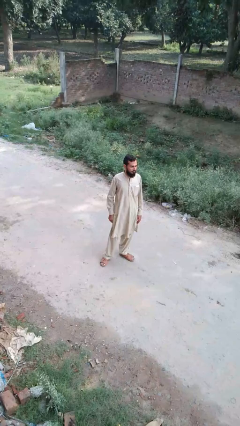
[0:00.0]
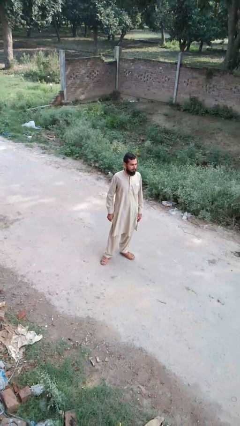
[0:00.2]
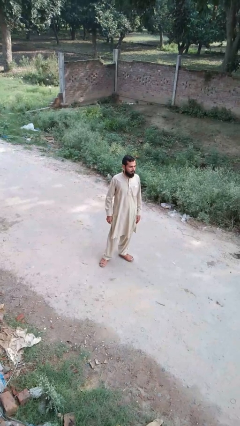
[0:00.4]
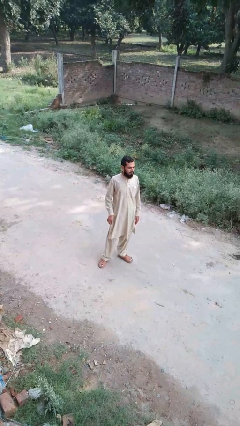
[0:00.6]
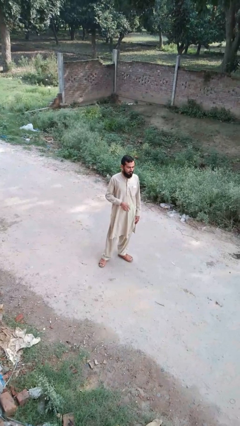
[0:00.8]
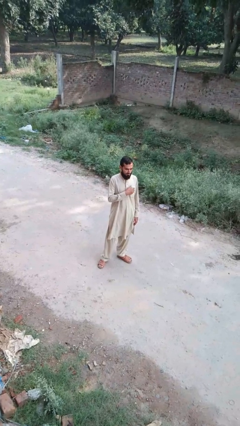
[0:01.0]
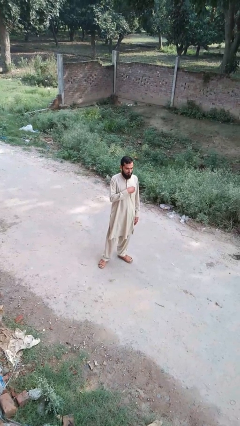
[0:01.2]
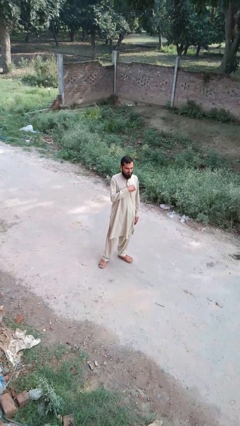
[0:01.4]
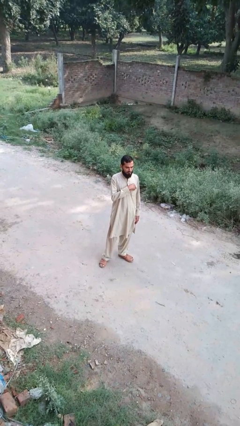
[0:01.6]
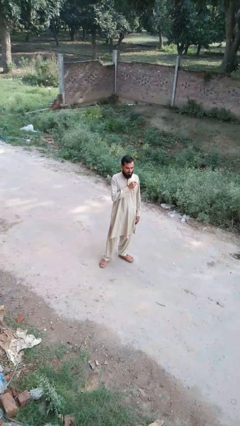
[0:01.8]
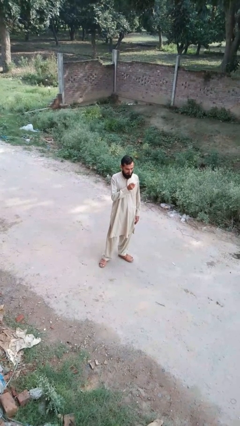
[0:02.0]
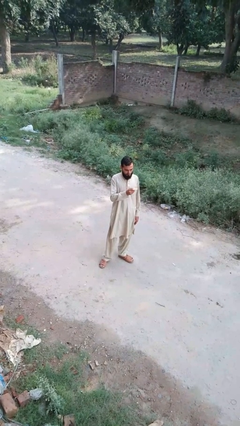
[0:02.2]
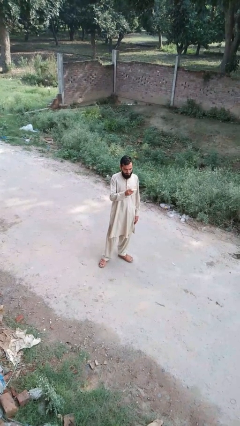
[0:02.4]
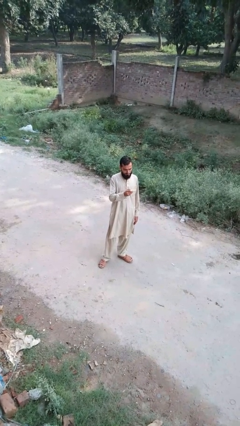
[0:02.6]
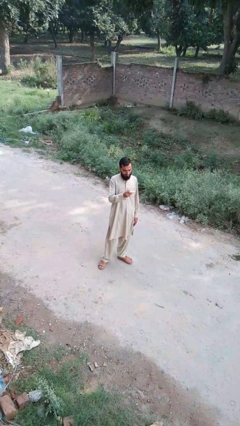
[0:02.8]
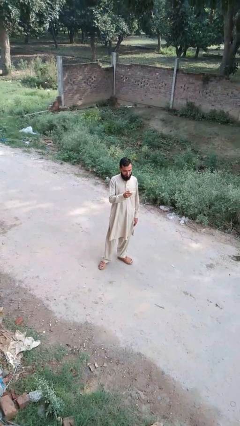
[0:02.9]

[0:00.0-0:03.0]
person takes phone from pocket

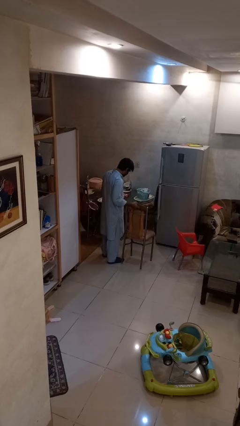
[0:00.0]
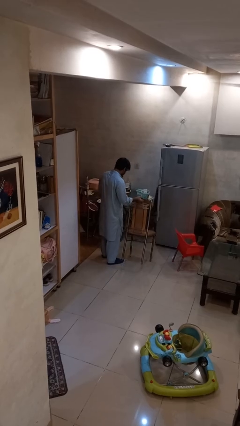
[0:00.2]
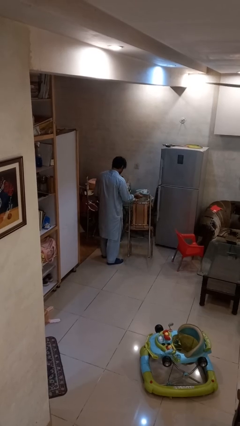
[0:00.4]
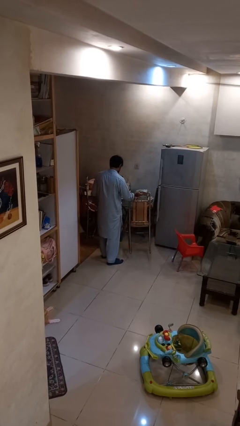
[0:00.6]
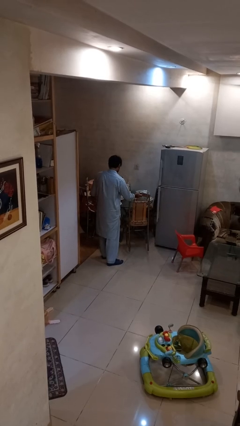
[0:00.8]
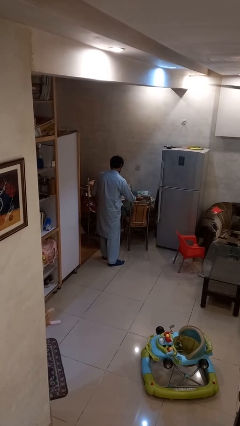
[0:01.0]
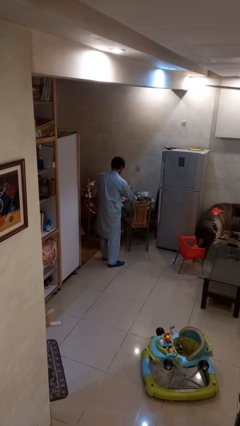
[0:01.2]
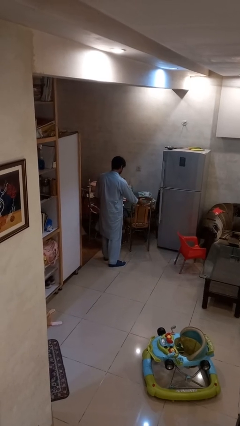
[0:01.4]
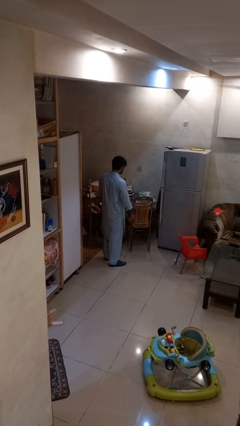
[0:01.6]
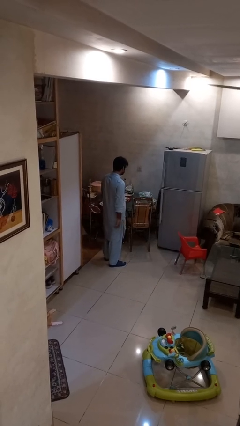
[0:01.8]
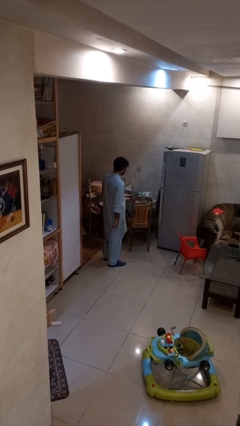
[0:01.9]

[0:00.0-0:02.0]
person pushes in chair

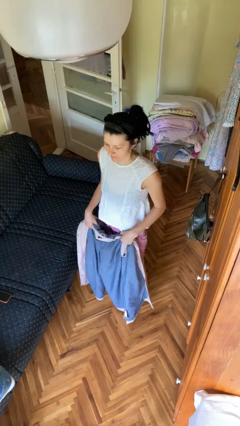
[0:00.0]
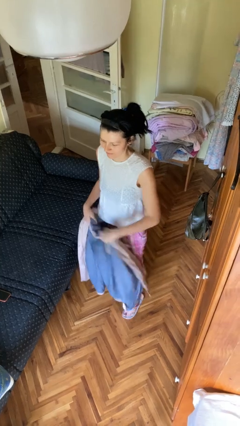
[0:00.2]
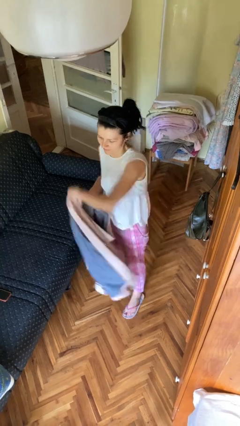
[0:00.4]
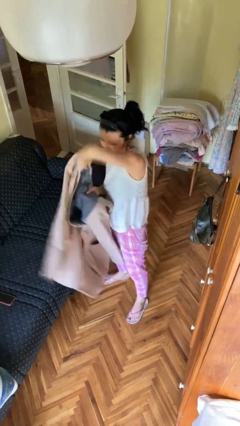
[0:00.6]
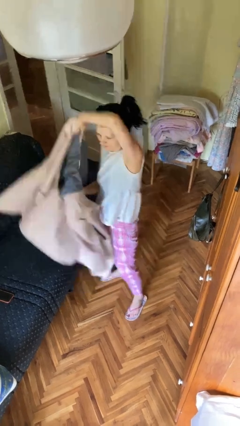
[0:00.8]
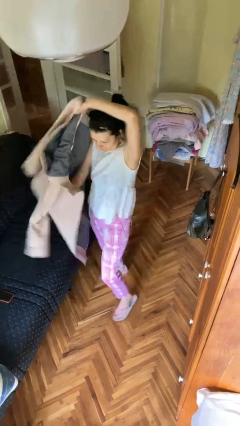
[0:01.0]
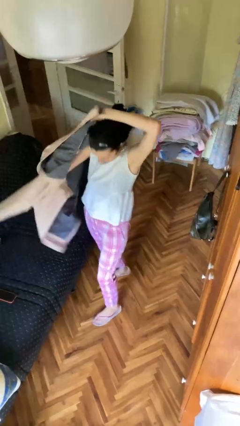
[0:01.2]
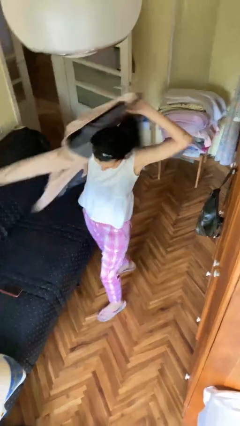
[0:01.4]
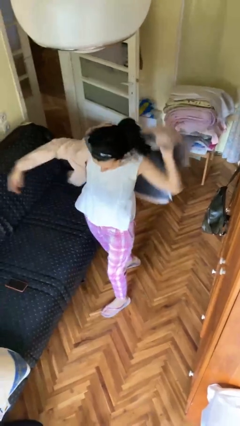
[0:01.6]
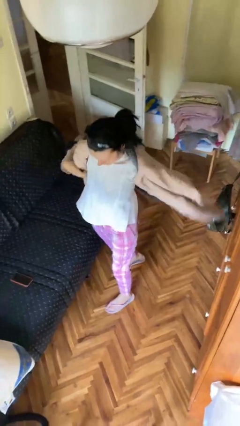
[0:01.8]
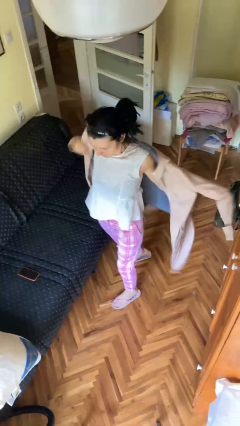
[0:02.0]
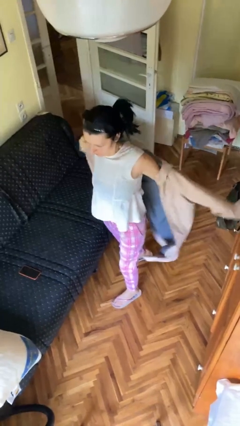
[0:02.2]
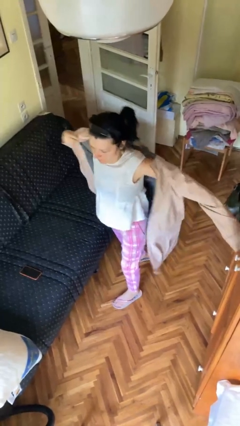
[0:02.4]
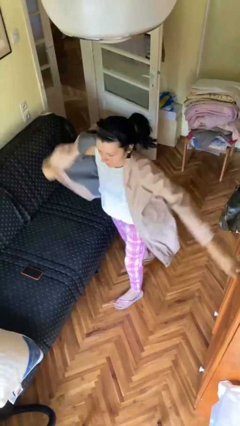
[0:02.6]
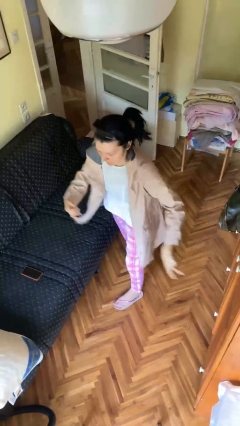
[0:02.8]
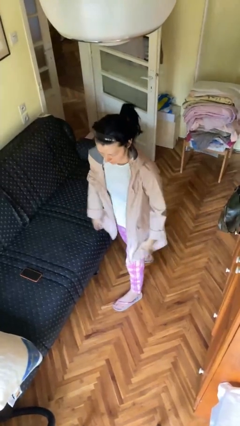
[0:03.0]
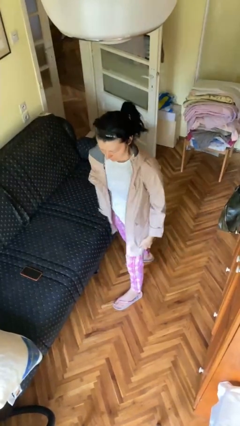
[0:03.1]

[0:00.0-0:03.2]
person puts on jacket

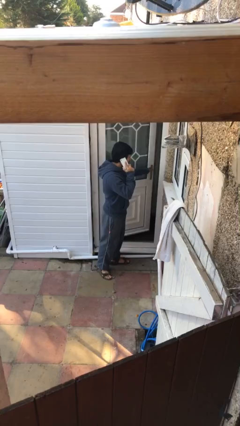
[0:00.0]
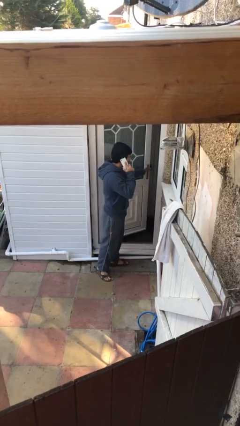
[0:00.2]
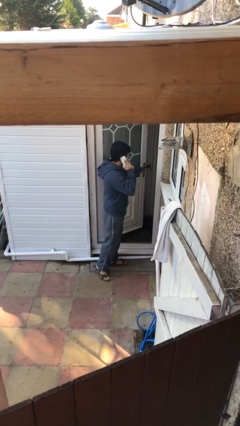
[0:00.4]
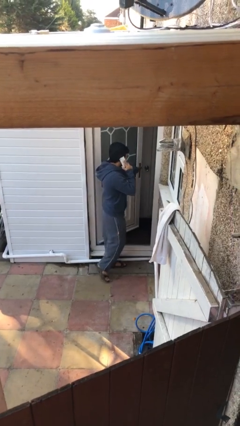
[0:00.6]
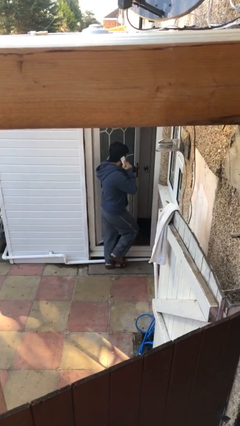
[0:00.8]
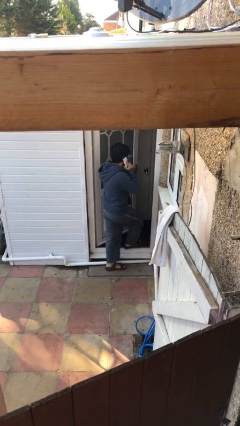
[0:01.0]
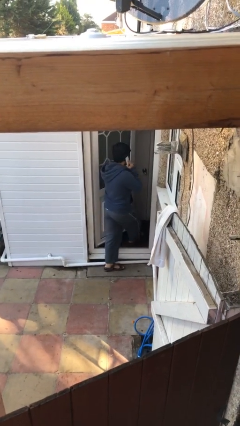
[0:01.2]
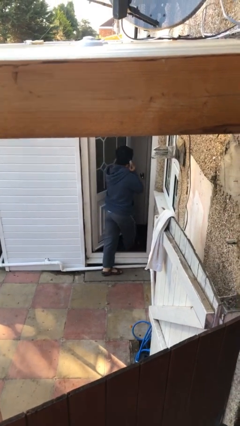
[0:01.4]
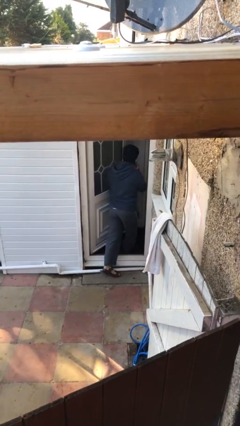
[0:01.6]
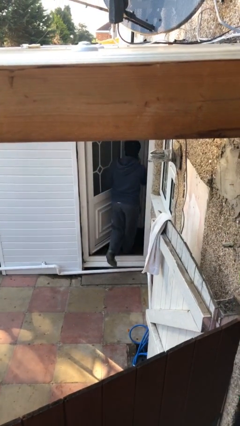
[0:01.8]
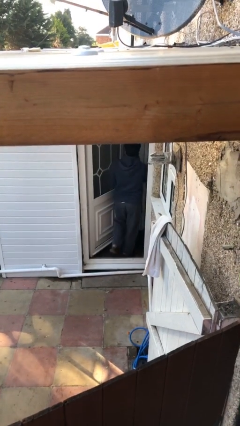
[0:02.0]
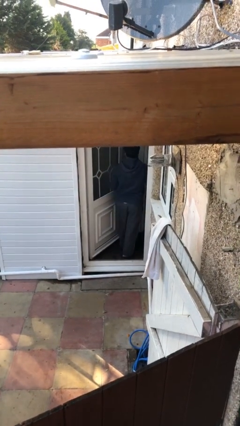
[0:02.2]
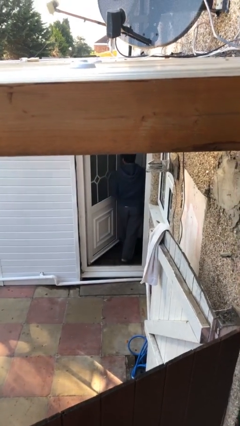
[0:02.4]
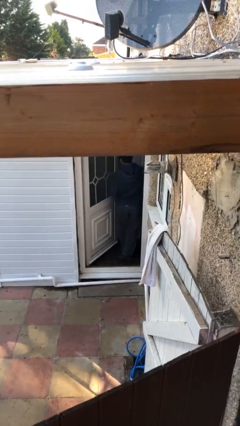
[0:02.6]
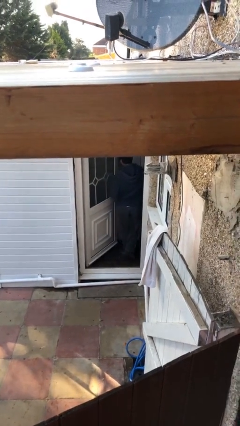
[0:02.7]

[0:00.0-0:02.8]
person exits scene through structure

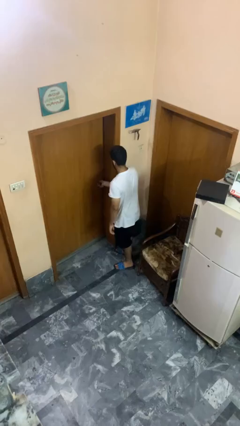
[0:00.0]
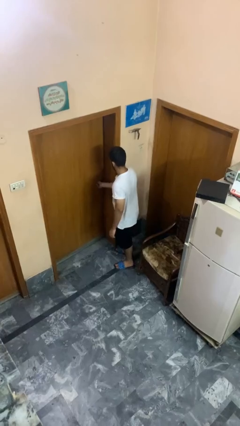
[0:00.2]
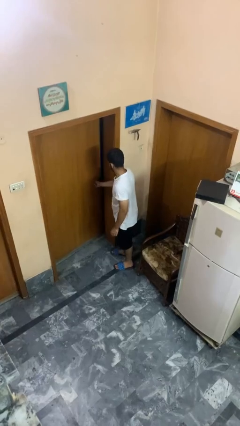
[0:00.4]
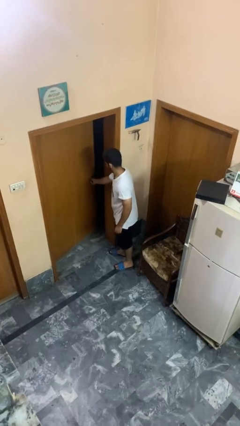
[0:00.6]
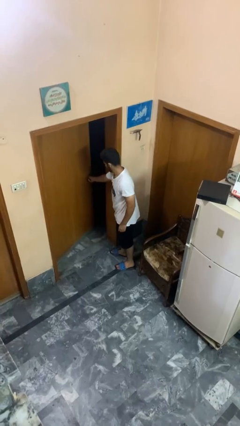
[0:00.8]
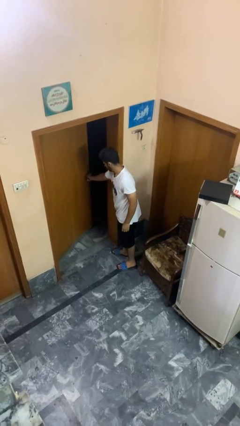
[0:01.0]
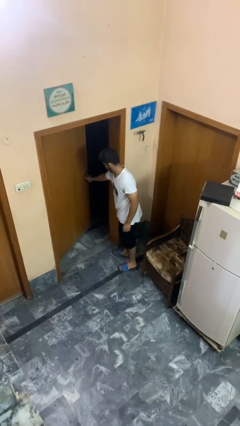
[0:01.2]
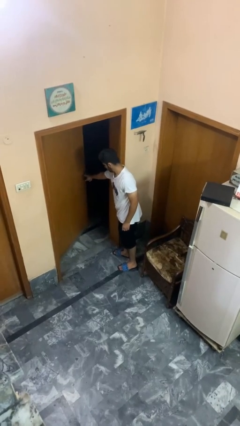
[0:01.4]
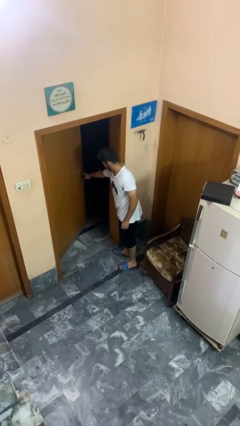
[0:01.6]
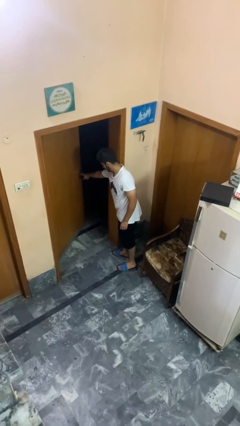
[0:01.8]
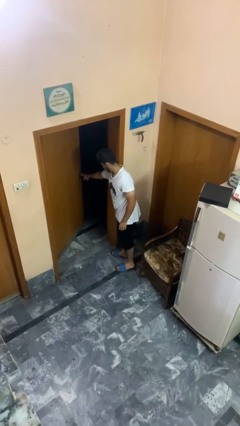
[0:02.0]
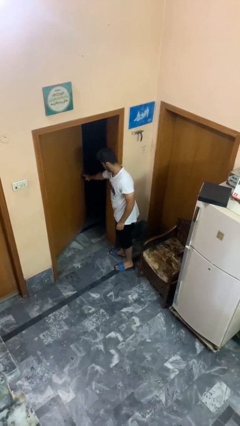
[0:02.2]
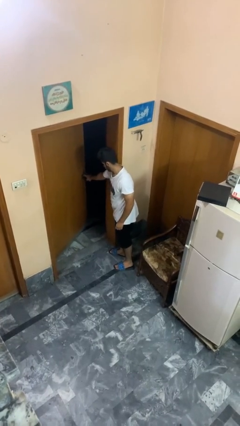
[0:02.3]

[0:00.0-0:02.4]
person opens facility door

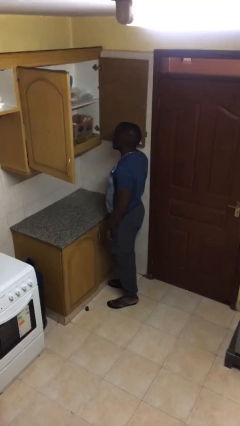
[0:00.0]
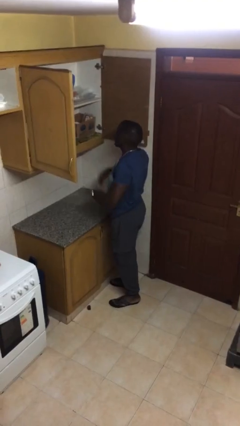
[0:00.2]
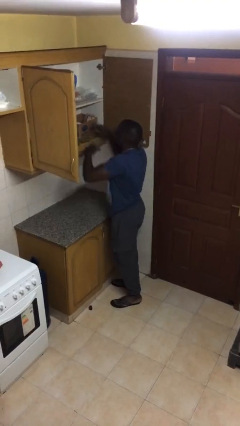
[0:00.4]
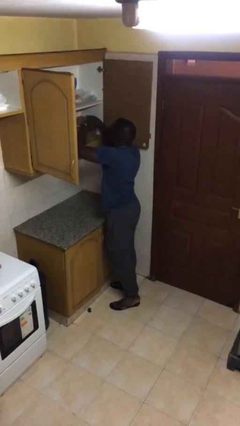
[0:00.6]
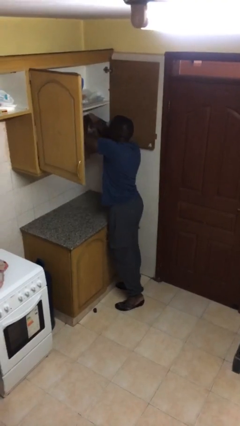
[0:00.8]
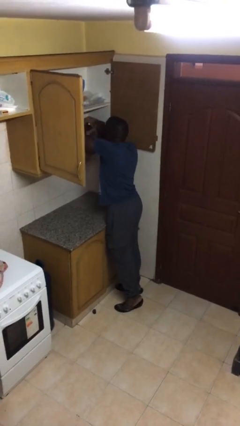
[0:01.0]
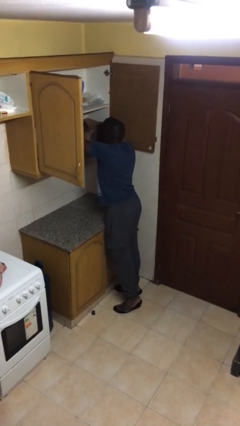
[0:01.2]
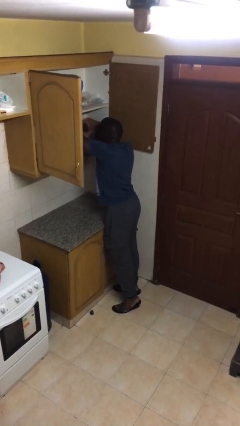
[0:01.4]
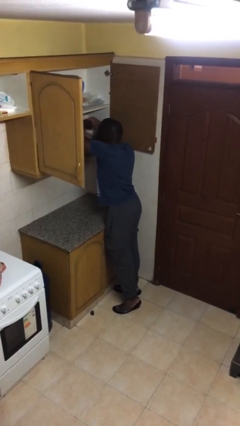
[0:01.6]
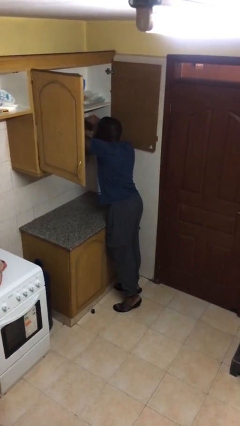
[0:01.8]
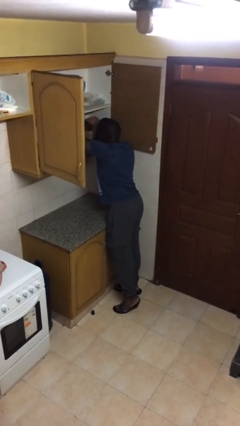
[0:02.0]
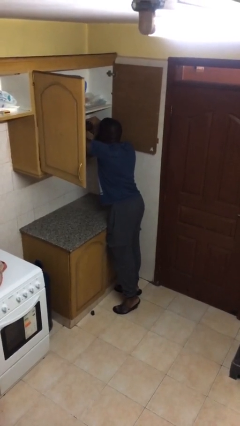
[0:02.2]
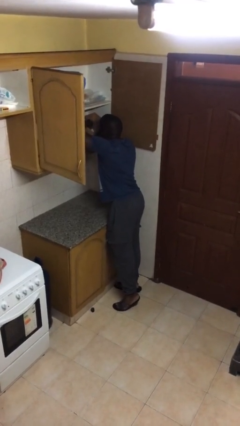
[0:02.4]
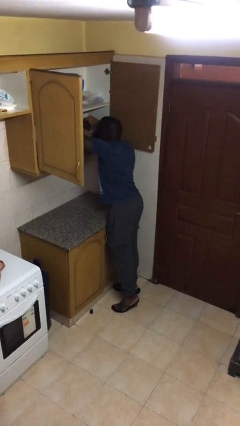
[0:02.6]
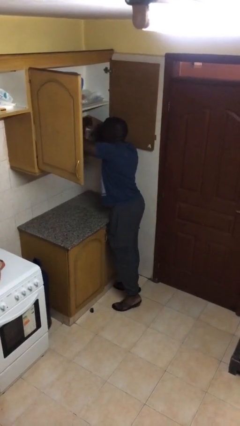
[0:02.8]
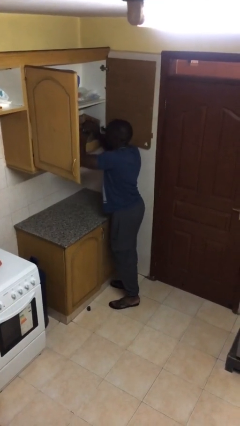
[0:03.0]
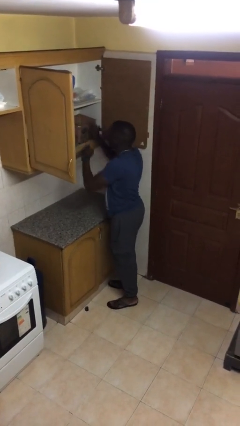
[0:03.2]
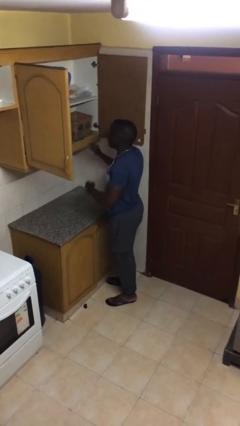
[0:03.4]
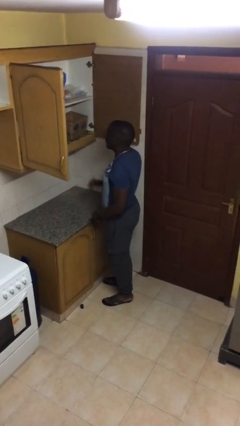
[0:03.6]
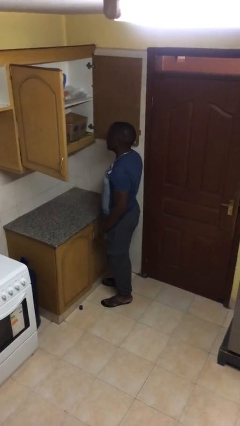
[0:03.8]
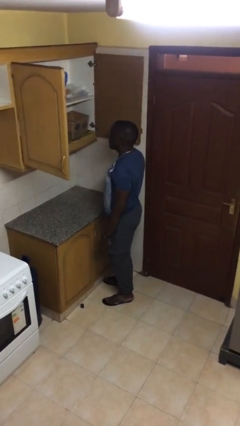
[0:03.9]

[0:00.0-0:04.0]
person searches in cabinet
